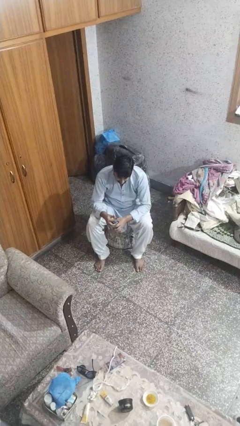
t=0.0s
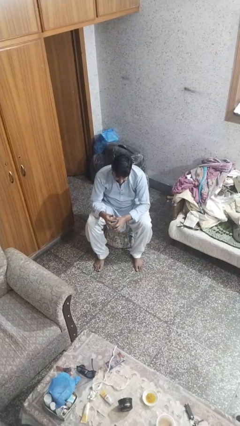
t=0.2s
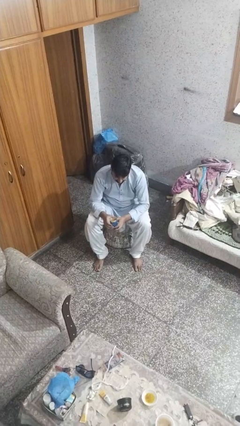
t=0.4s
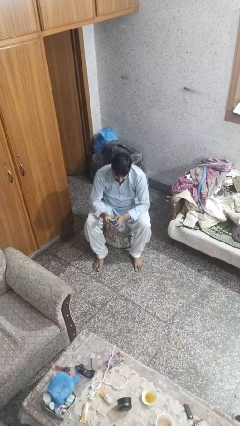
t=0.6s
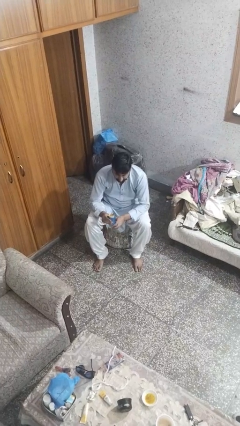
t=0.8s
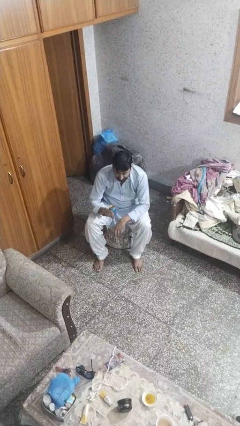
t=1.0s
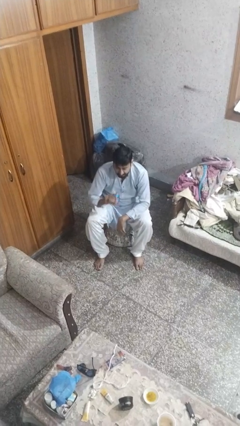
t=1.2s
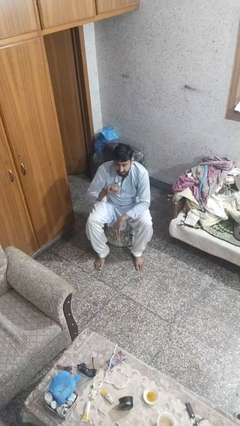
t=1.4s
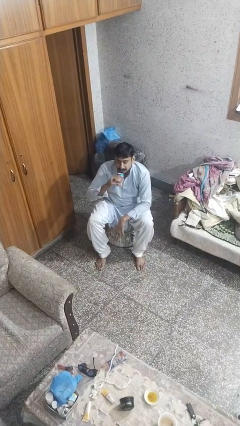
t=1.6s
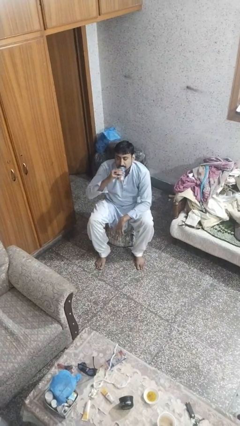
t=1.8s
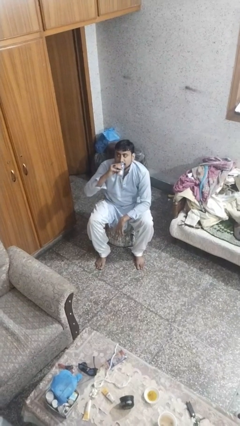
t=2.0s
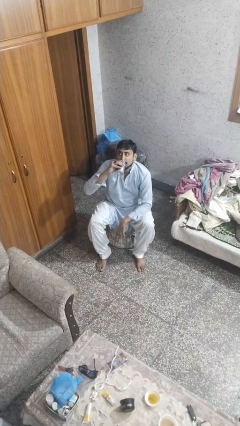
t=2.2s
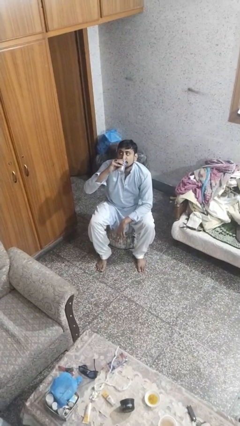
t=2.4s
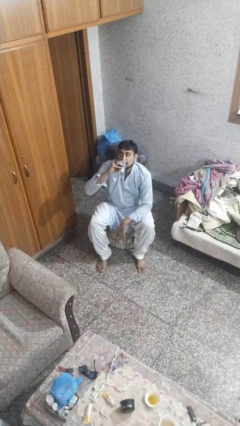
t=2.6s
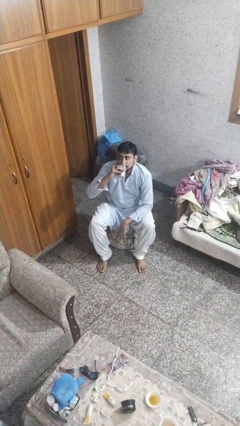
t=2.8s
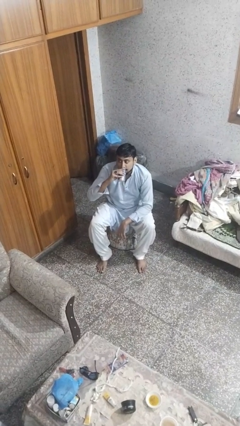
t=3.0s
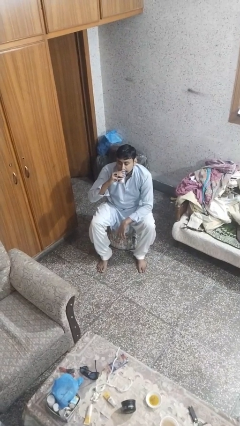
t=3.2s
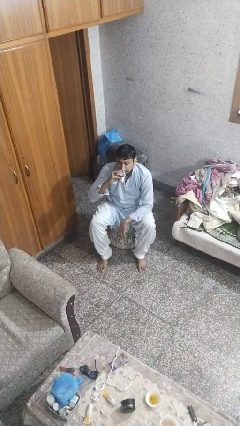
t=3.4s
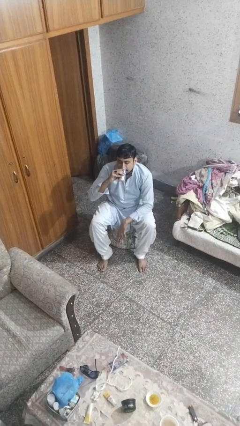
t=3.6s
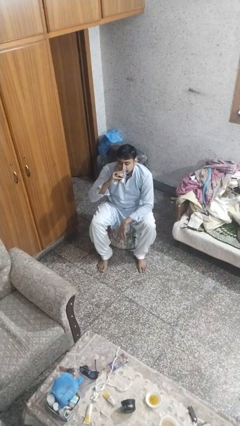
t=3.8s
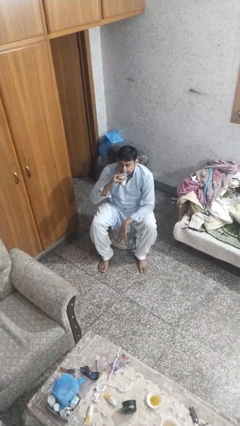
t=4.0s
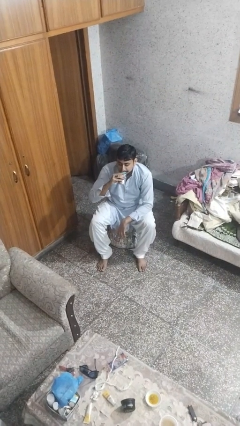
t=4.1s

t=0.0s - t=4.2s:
person drinks from beverage can

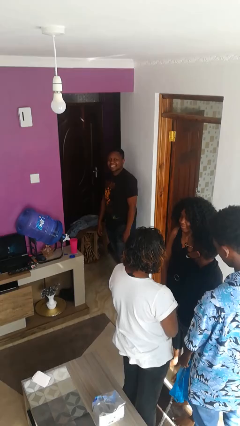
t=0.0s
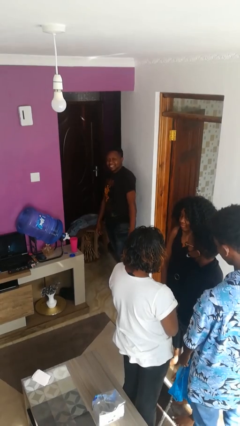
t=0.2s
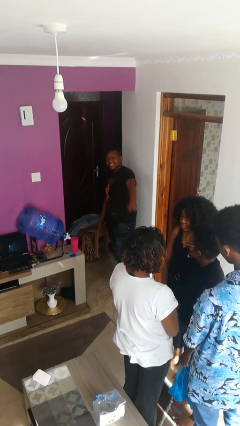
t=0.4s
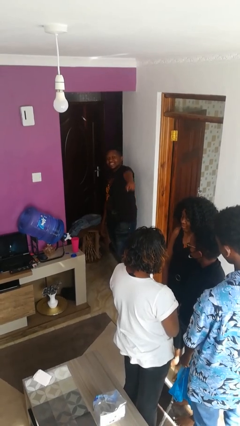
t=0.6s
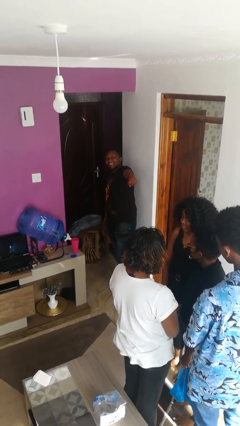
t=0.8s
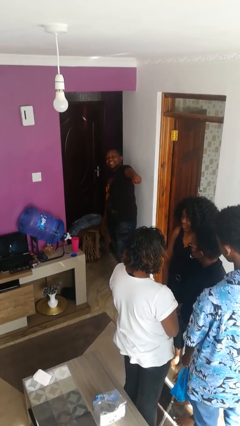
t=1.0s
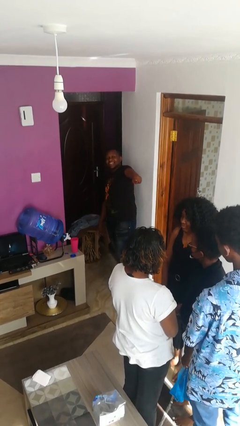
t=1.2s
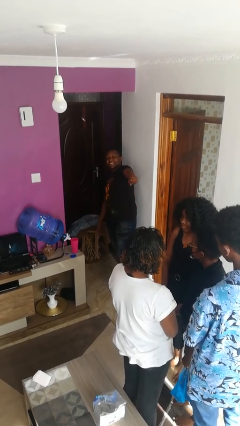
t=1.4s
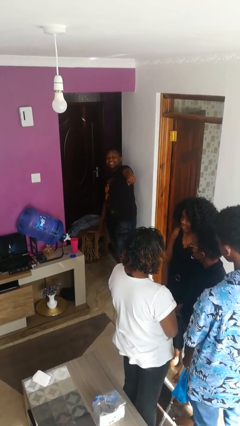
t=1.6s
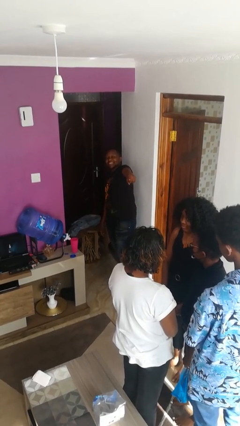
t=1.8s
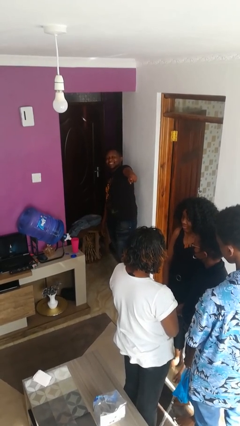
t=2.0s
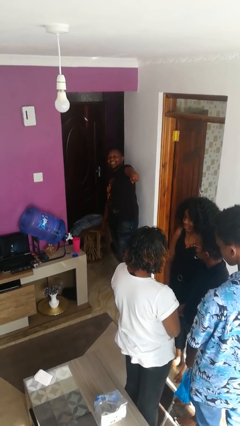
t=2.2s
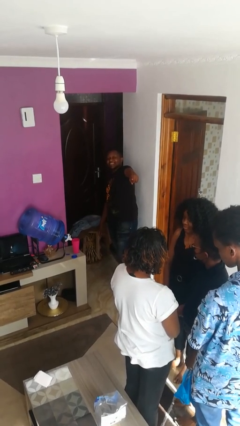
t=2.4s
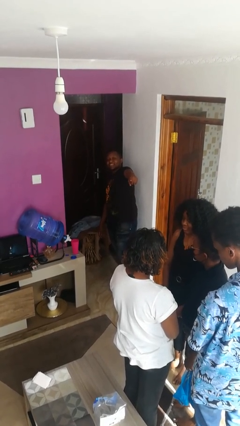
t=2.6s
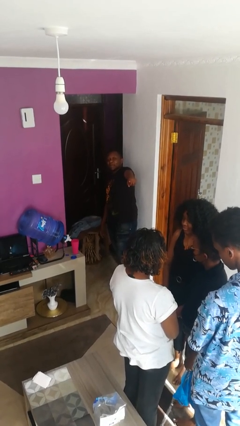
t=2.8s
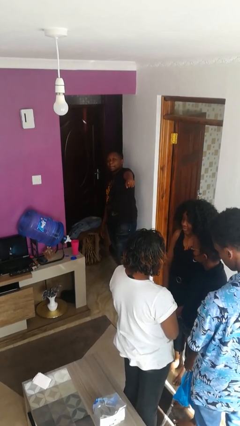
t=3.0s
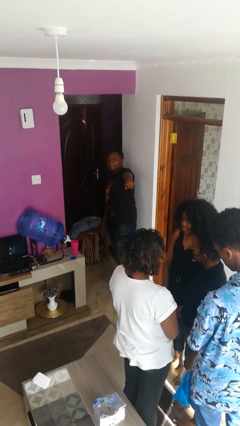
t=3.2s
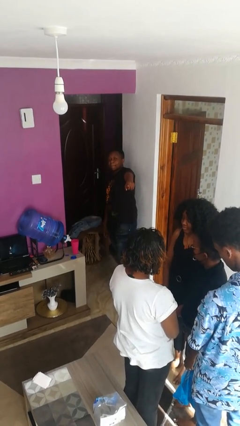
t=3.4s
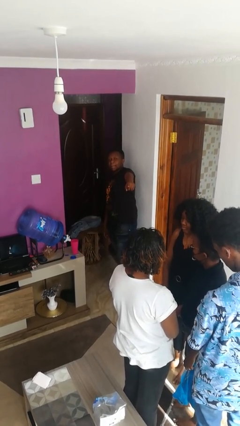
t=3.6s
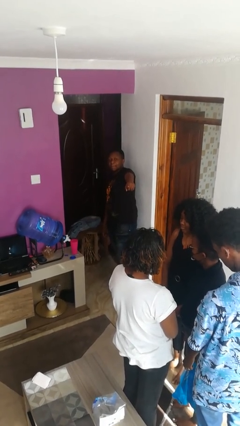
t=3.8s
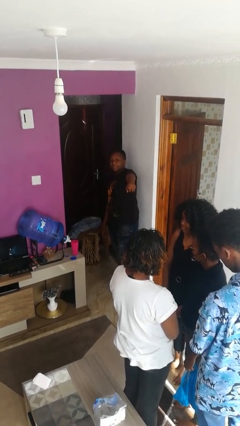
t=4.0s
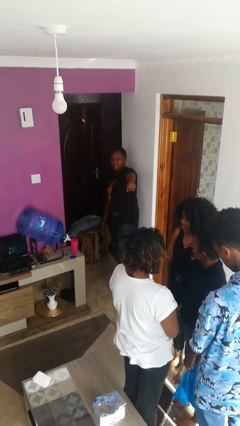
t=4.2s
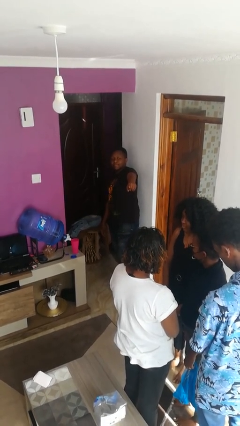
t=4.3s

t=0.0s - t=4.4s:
person points at person

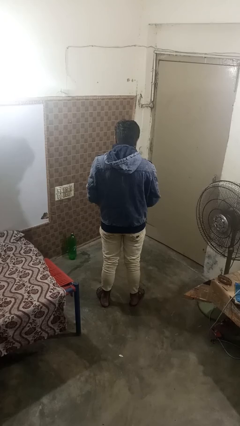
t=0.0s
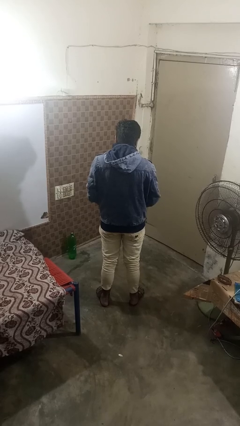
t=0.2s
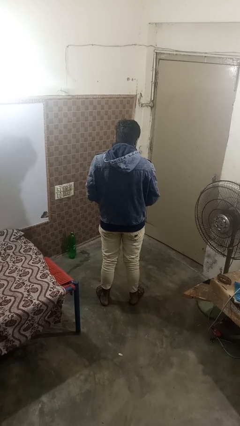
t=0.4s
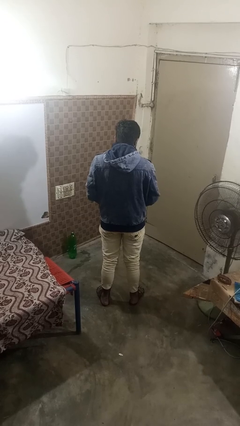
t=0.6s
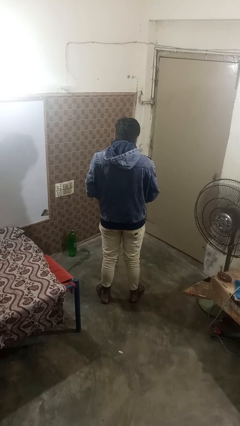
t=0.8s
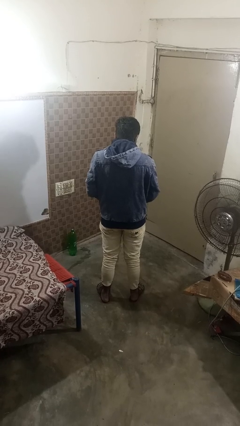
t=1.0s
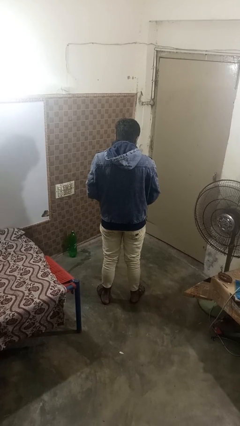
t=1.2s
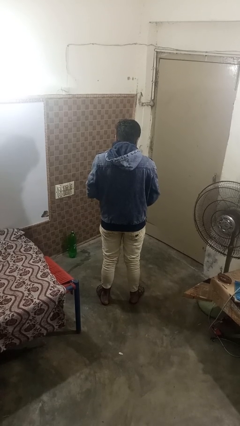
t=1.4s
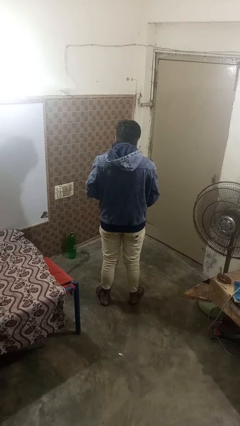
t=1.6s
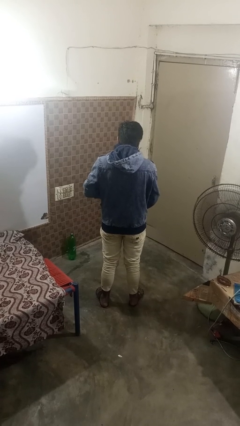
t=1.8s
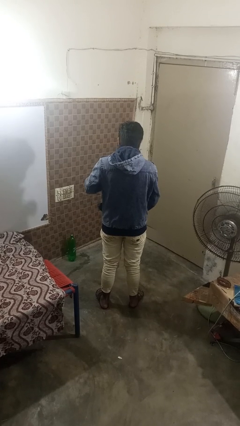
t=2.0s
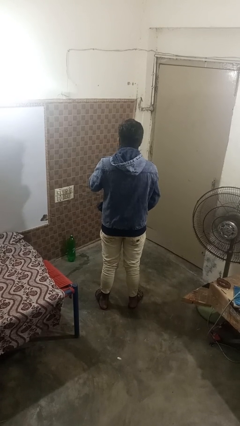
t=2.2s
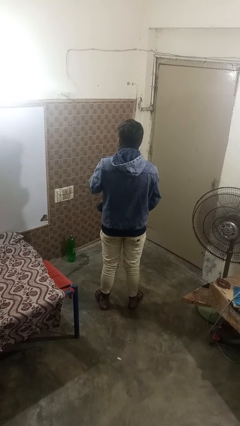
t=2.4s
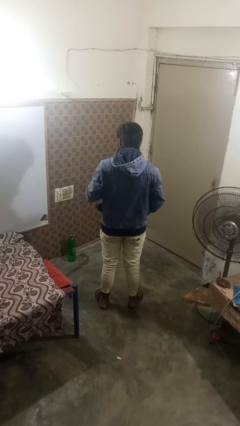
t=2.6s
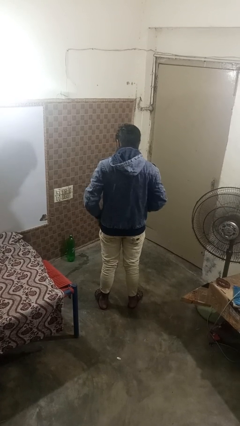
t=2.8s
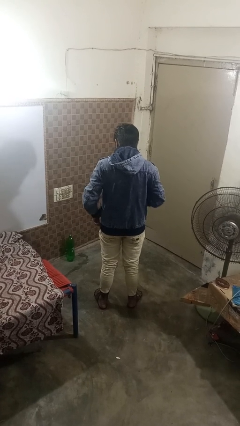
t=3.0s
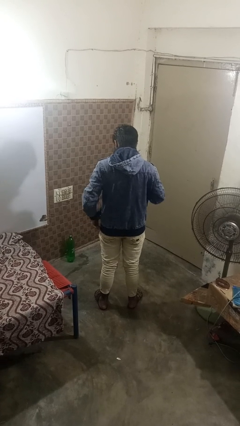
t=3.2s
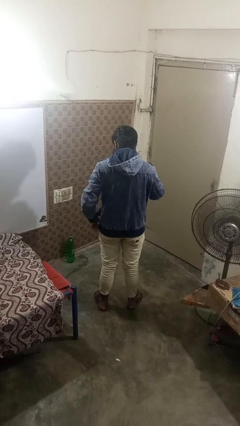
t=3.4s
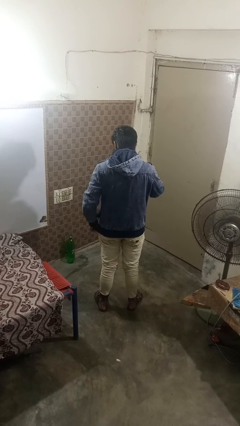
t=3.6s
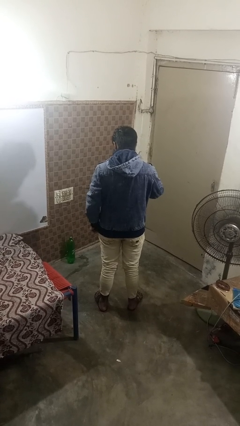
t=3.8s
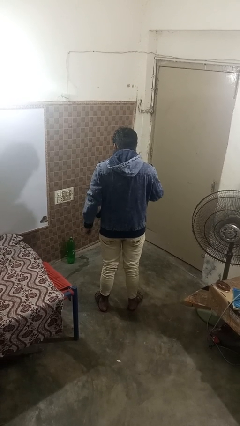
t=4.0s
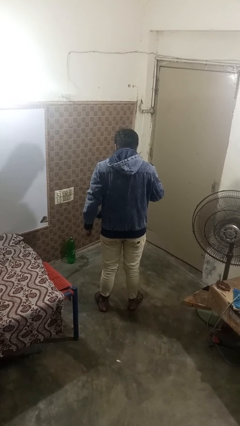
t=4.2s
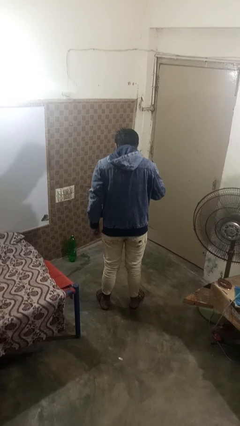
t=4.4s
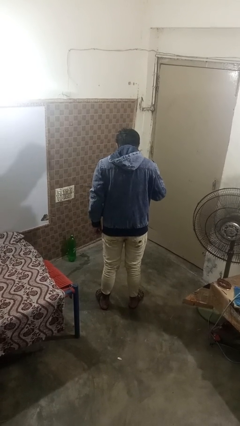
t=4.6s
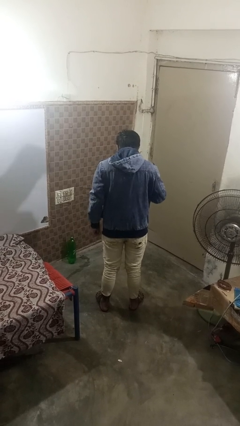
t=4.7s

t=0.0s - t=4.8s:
person zips up jacket

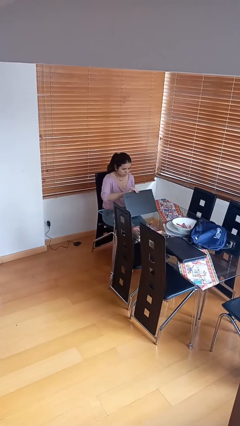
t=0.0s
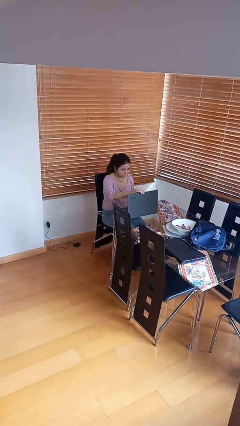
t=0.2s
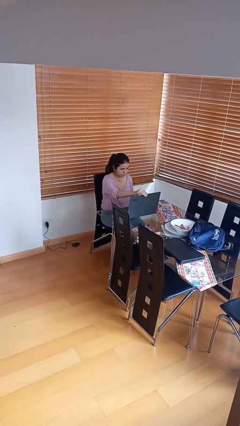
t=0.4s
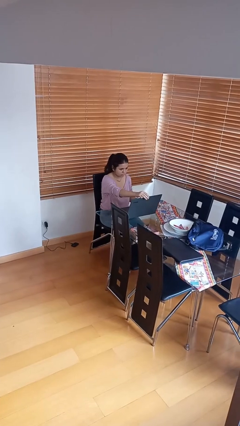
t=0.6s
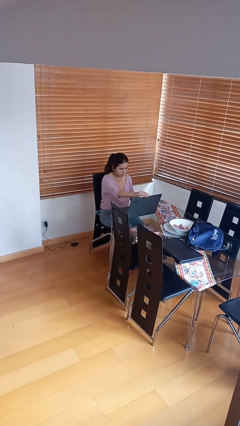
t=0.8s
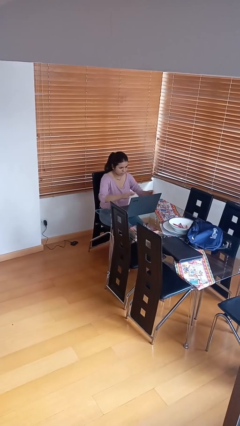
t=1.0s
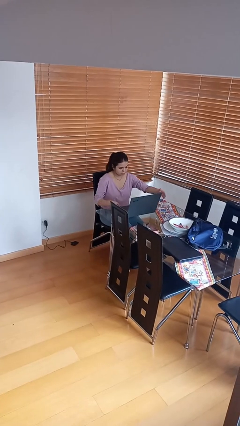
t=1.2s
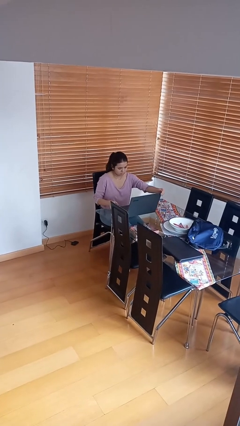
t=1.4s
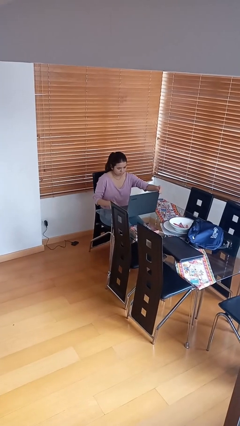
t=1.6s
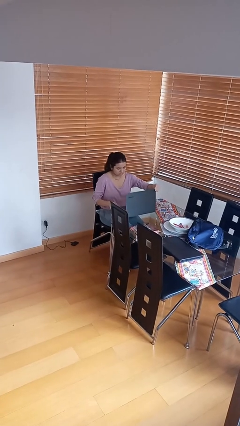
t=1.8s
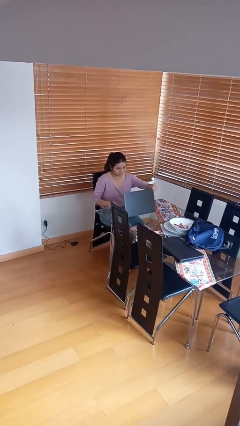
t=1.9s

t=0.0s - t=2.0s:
person interacts with laptop

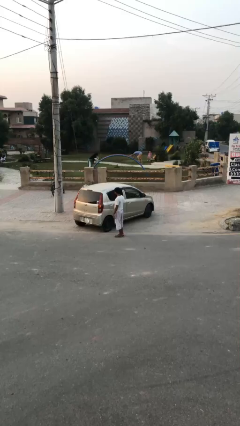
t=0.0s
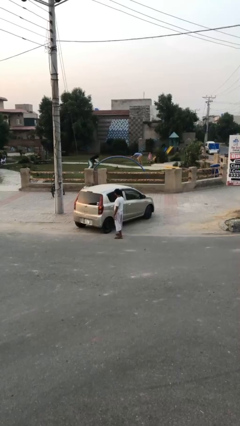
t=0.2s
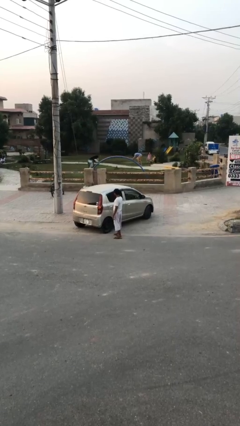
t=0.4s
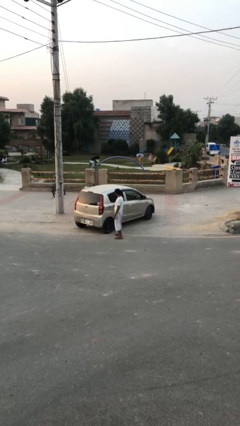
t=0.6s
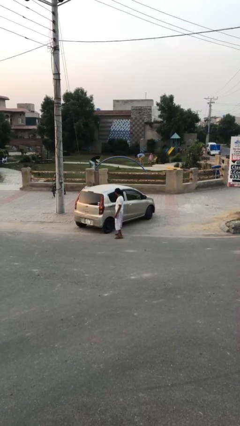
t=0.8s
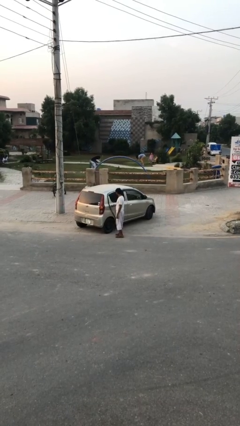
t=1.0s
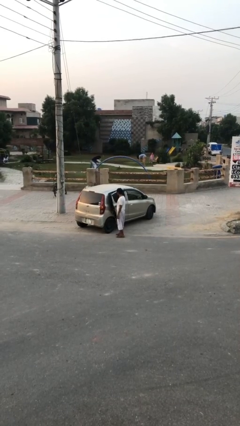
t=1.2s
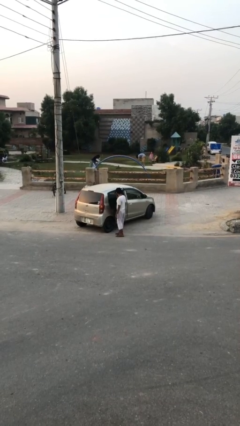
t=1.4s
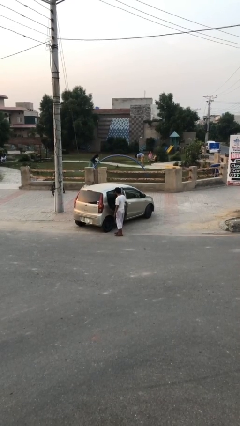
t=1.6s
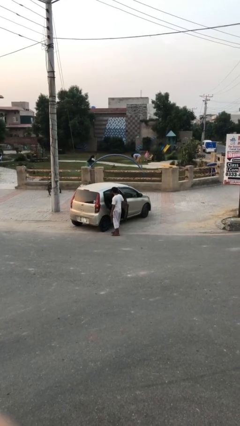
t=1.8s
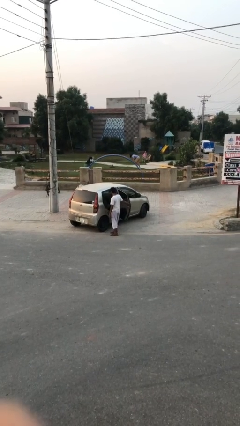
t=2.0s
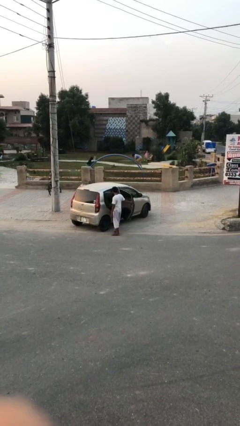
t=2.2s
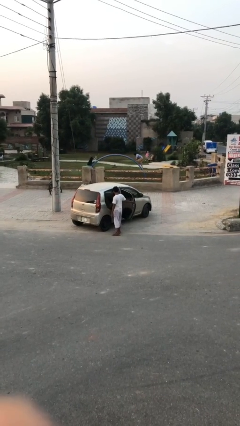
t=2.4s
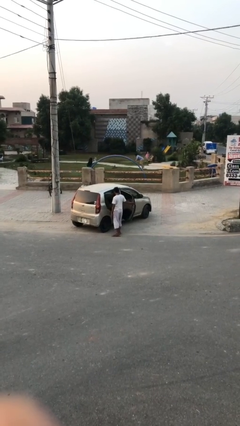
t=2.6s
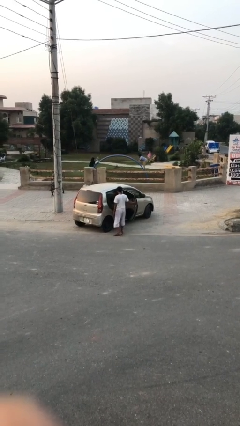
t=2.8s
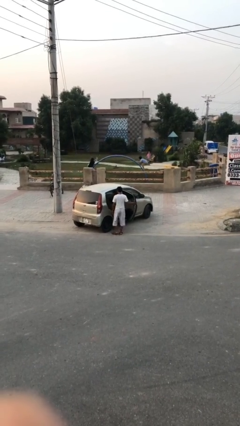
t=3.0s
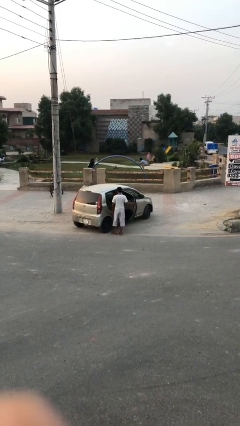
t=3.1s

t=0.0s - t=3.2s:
person opens car door
